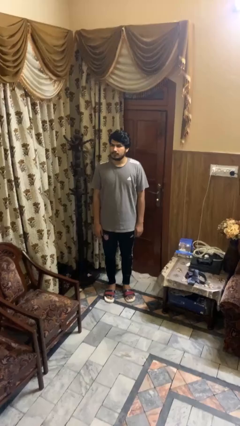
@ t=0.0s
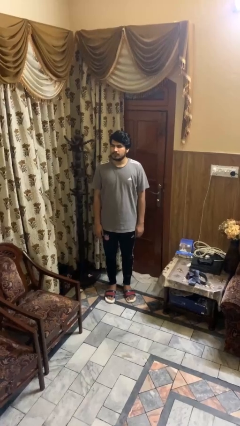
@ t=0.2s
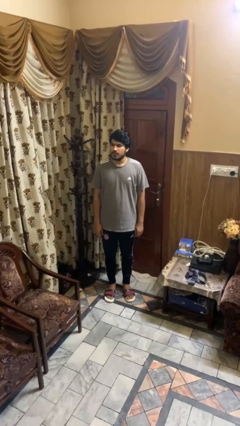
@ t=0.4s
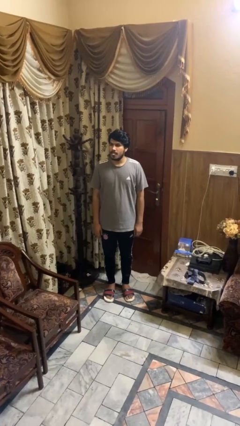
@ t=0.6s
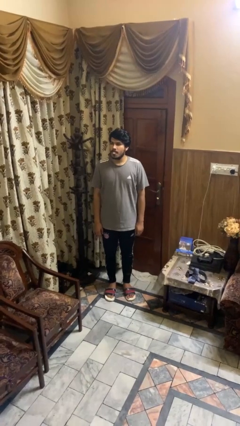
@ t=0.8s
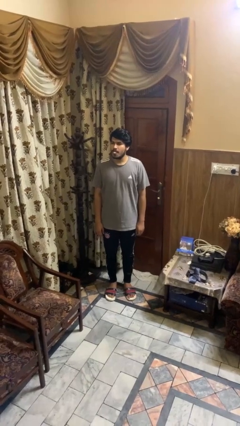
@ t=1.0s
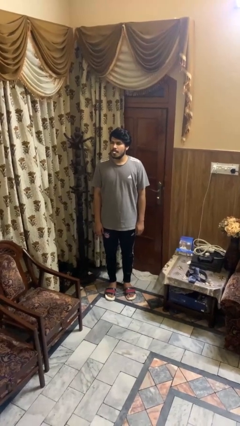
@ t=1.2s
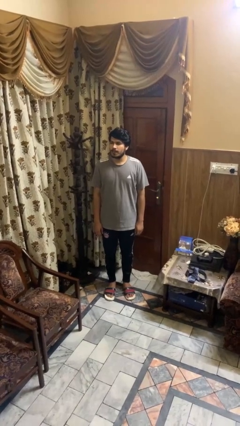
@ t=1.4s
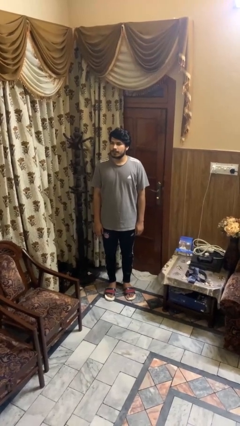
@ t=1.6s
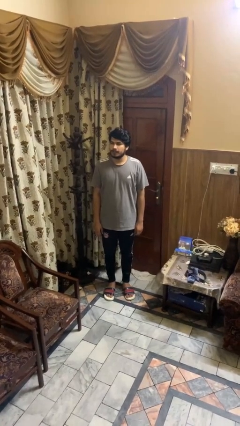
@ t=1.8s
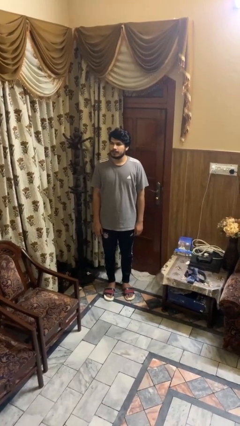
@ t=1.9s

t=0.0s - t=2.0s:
person sticks out tongue

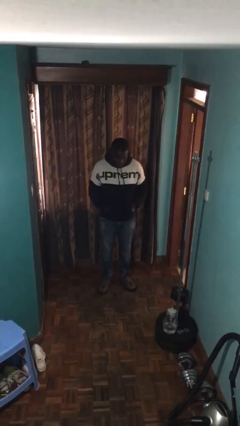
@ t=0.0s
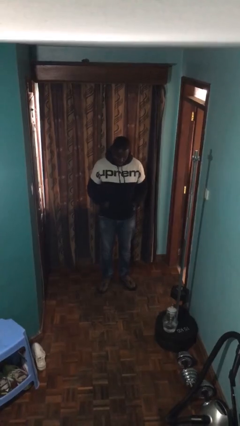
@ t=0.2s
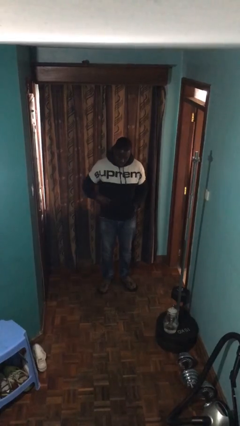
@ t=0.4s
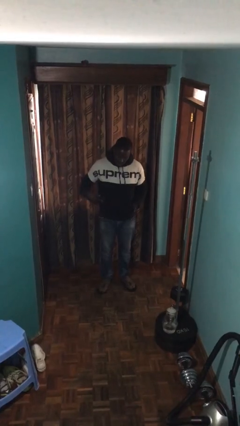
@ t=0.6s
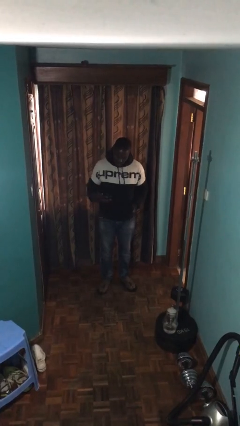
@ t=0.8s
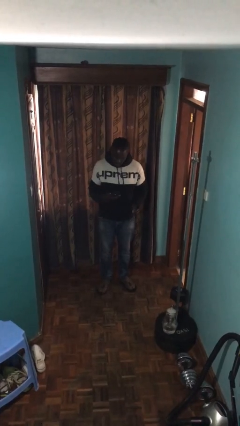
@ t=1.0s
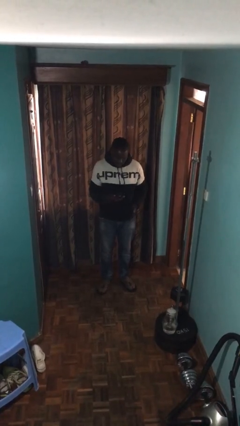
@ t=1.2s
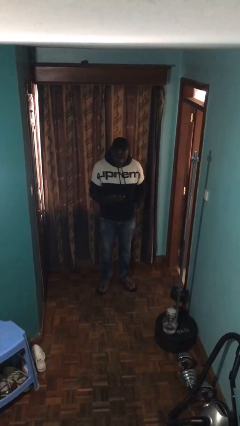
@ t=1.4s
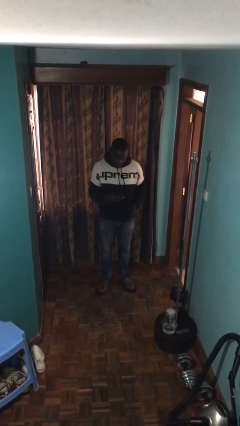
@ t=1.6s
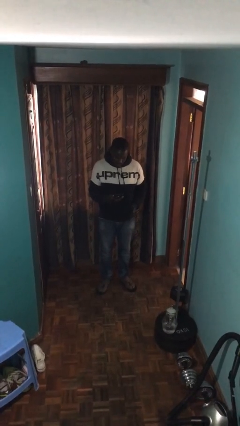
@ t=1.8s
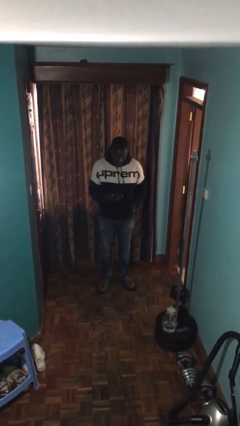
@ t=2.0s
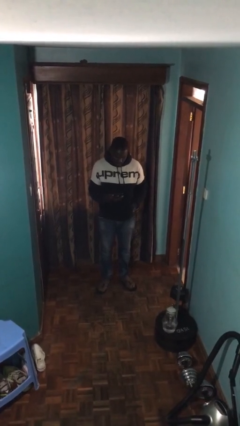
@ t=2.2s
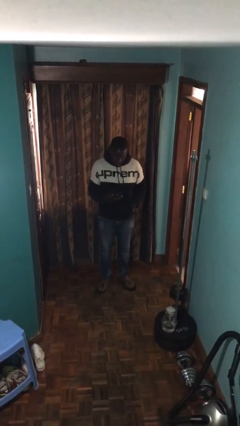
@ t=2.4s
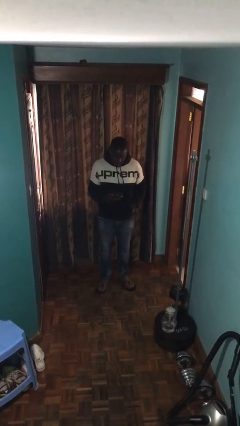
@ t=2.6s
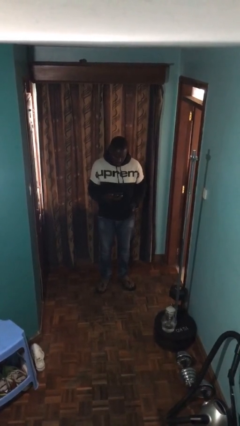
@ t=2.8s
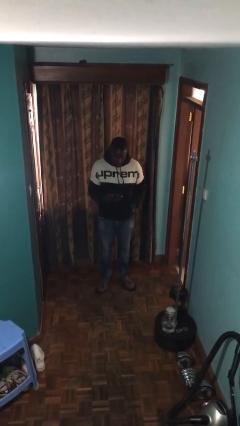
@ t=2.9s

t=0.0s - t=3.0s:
person takes phone from pocket

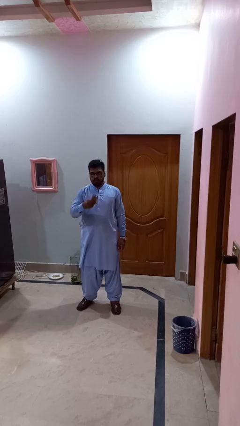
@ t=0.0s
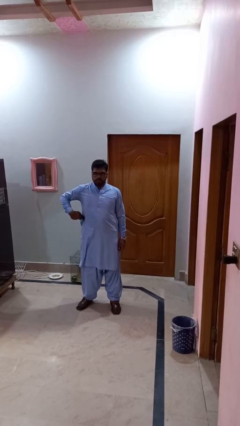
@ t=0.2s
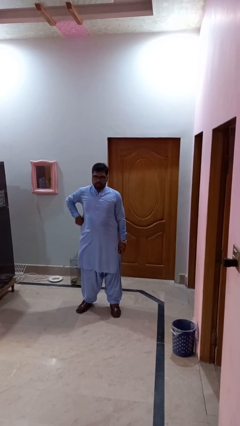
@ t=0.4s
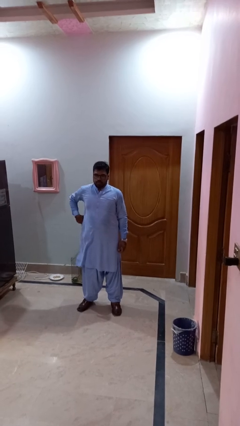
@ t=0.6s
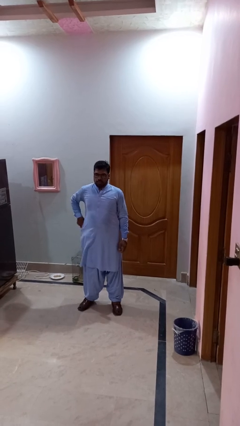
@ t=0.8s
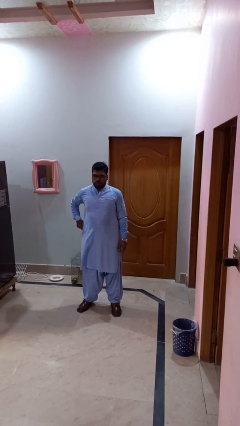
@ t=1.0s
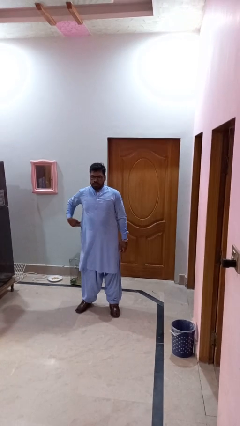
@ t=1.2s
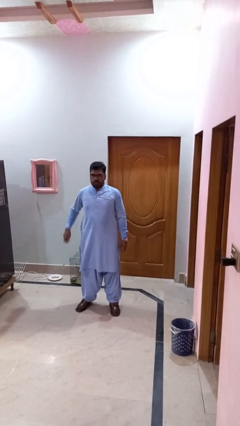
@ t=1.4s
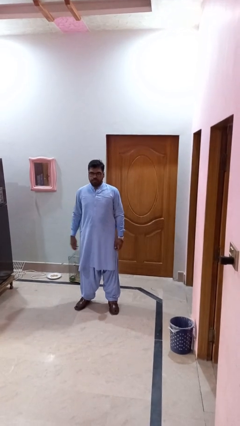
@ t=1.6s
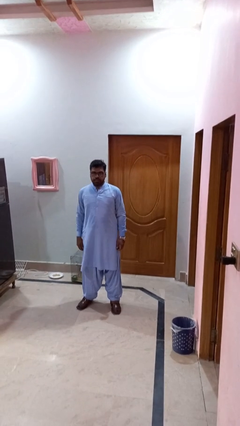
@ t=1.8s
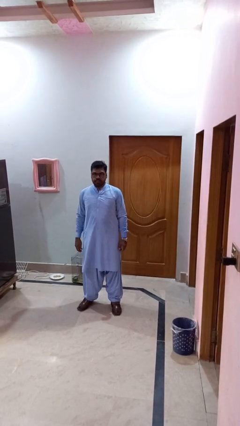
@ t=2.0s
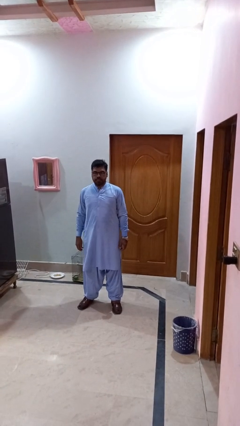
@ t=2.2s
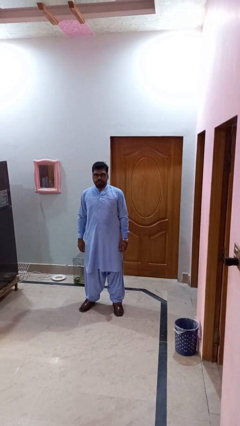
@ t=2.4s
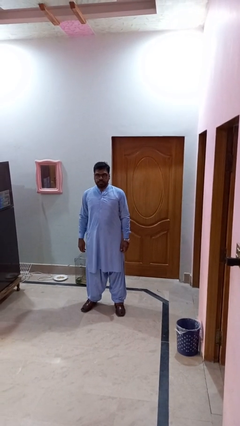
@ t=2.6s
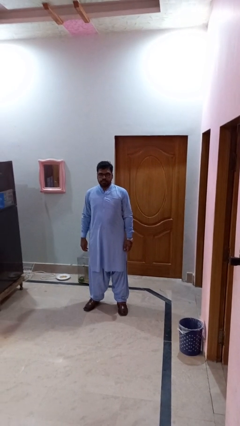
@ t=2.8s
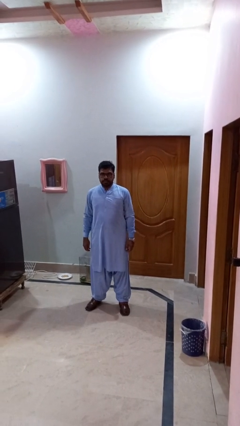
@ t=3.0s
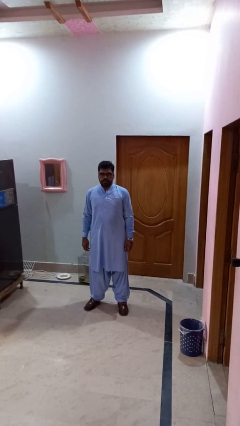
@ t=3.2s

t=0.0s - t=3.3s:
person puts phone into pocket

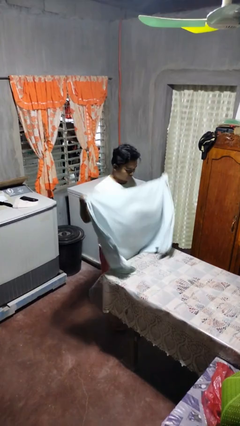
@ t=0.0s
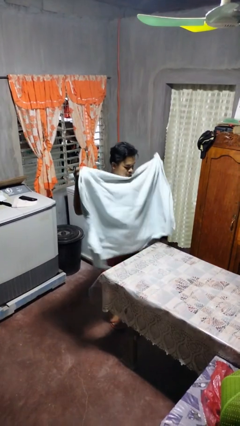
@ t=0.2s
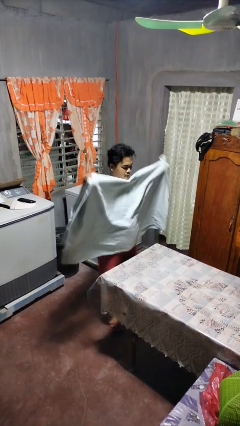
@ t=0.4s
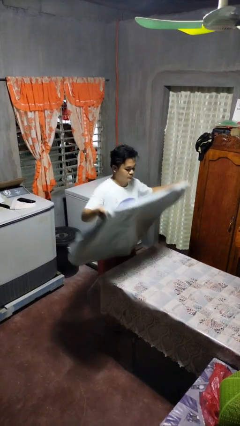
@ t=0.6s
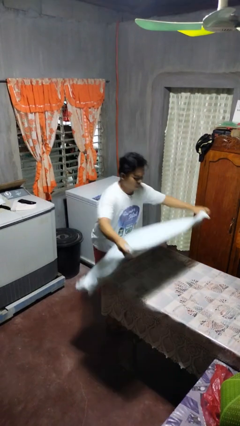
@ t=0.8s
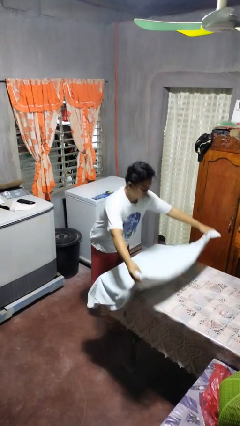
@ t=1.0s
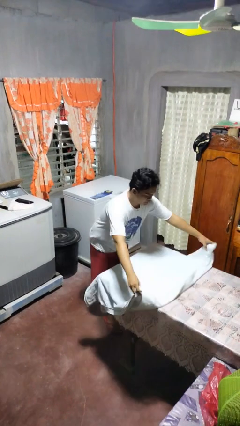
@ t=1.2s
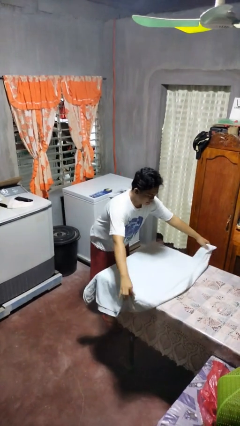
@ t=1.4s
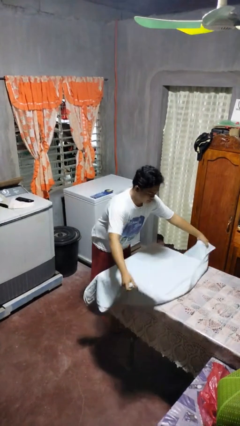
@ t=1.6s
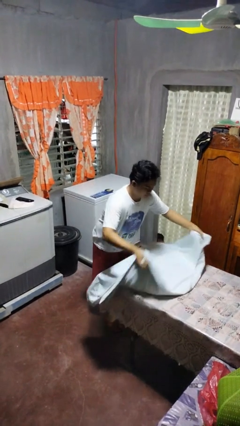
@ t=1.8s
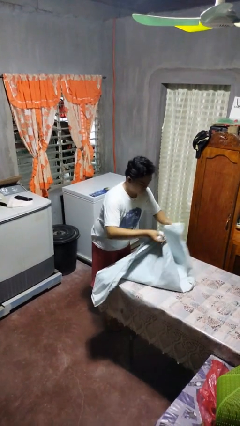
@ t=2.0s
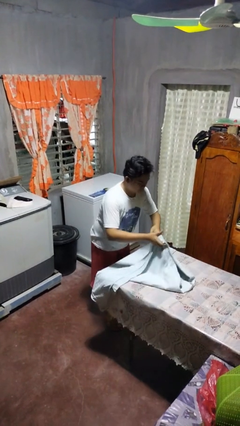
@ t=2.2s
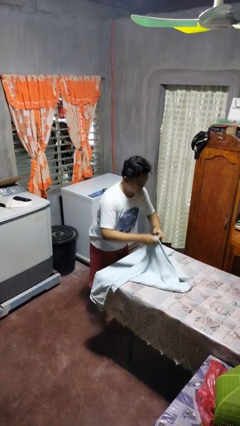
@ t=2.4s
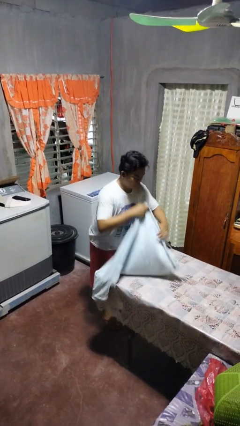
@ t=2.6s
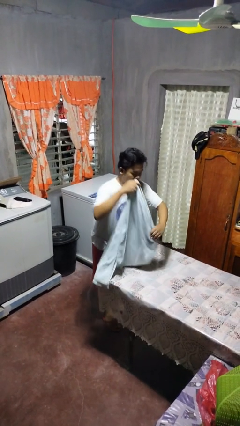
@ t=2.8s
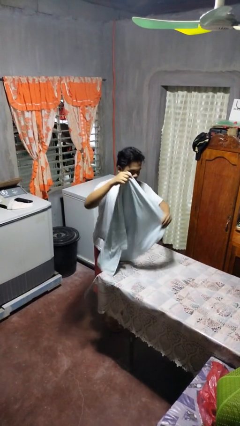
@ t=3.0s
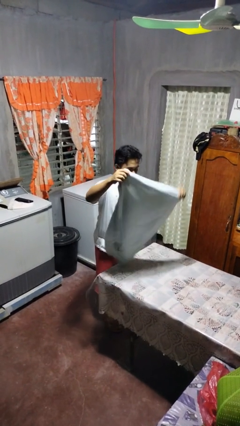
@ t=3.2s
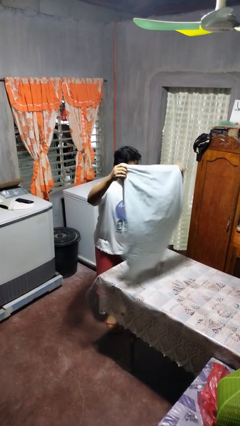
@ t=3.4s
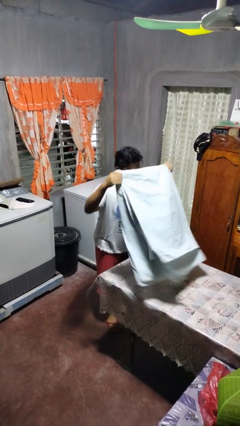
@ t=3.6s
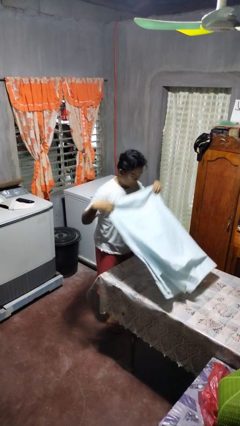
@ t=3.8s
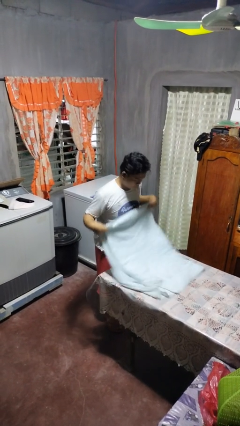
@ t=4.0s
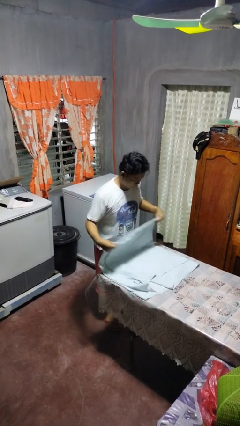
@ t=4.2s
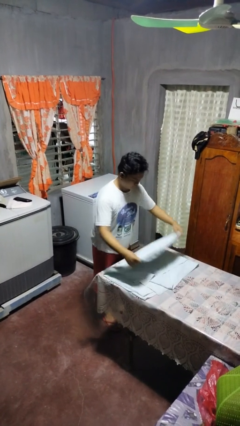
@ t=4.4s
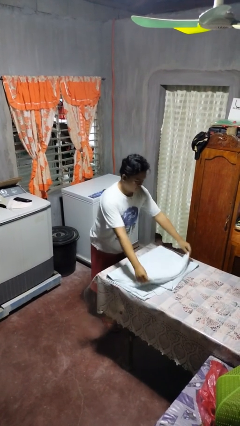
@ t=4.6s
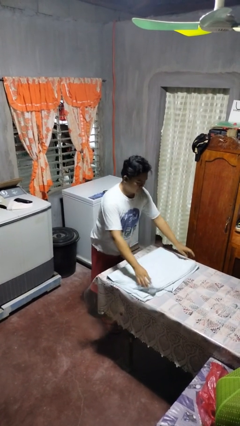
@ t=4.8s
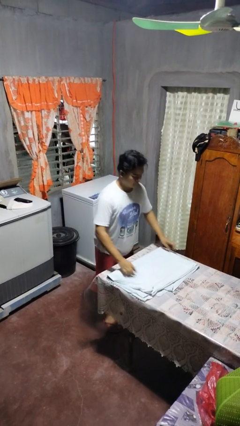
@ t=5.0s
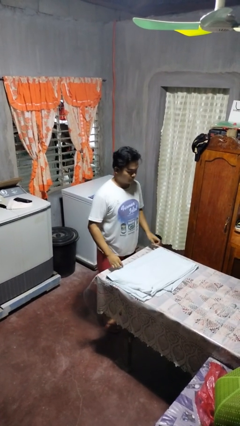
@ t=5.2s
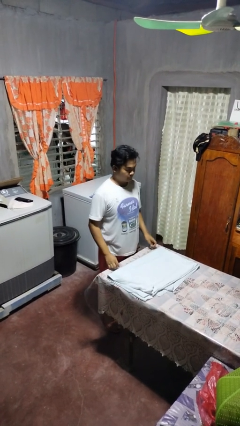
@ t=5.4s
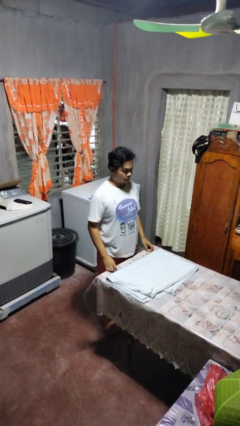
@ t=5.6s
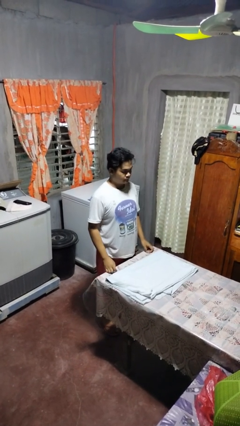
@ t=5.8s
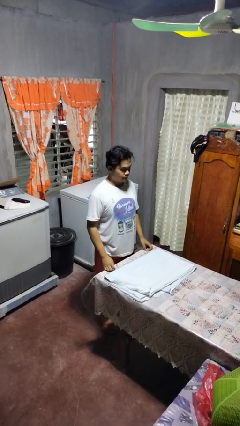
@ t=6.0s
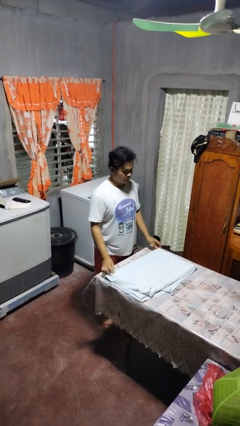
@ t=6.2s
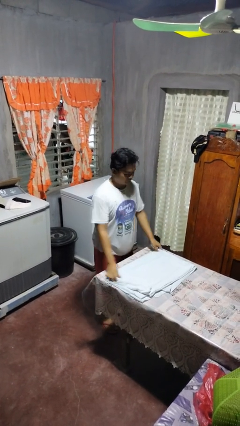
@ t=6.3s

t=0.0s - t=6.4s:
person folds blanket

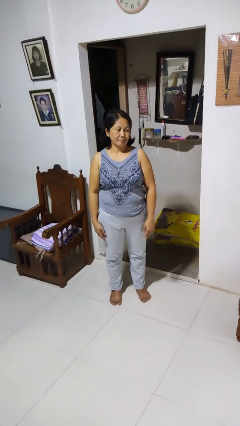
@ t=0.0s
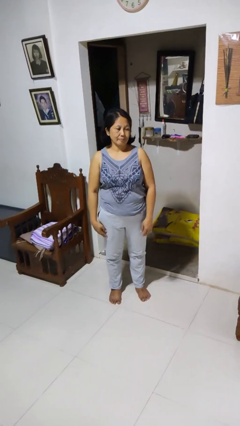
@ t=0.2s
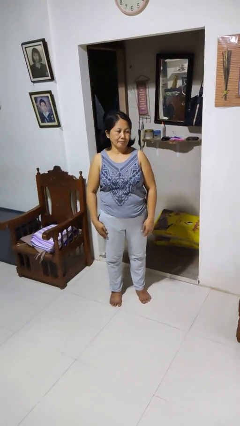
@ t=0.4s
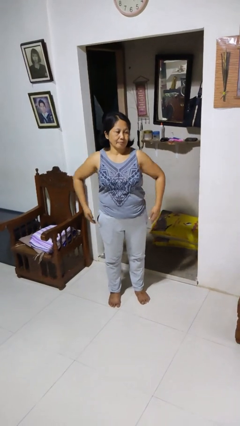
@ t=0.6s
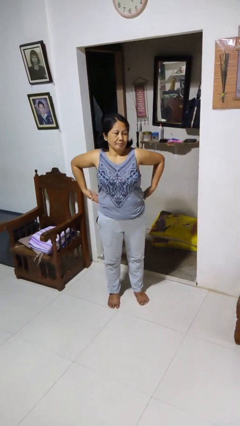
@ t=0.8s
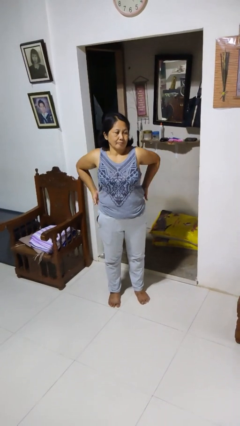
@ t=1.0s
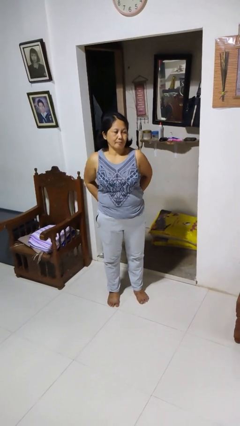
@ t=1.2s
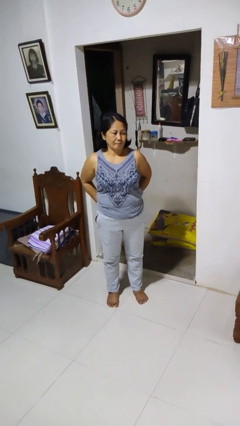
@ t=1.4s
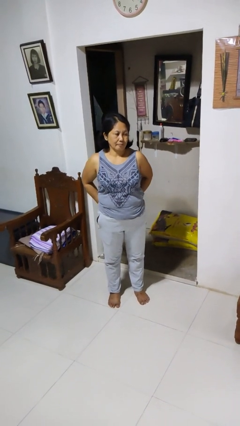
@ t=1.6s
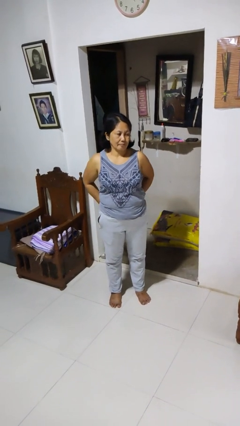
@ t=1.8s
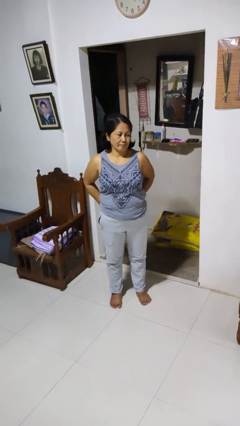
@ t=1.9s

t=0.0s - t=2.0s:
person puts hands in back pockets

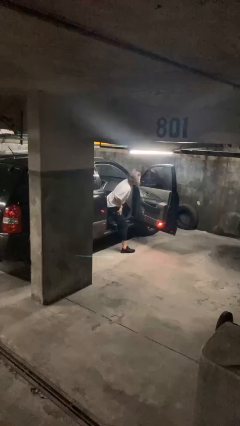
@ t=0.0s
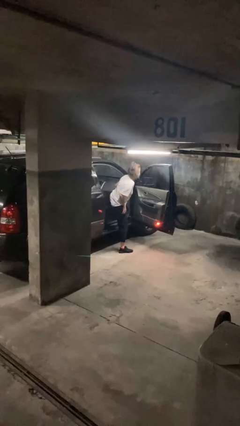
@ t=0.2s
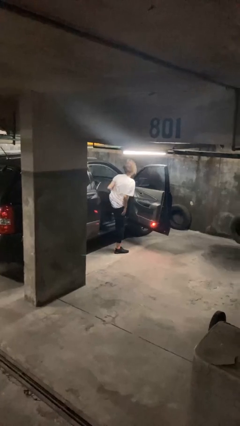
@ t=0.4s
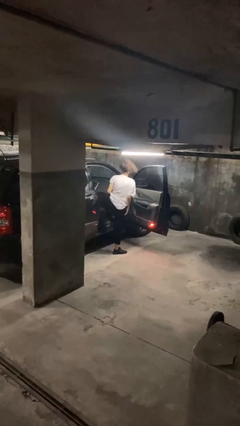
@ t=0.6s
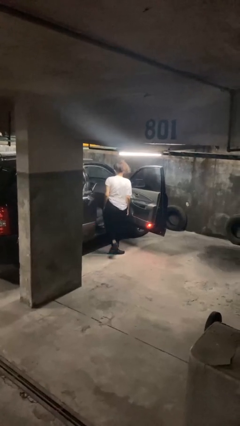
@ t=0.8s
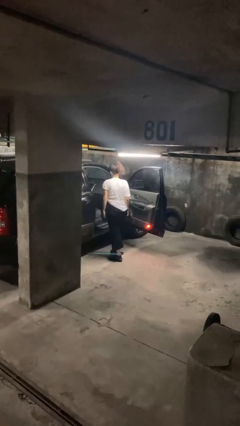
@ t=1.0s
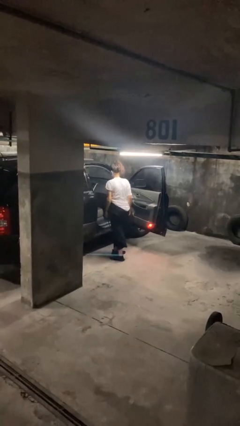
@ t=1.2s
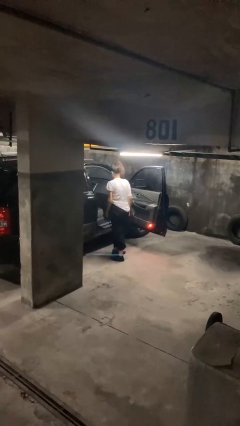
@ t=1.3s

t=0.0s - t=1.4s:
person exits car
